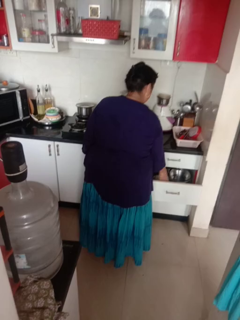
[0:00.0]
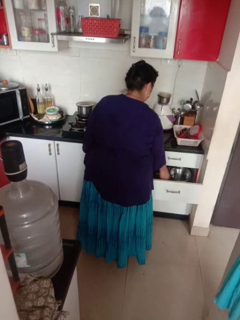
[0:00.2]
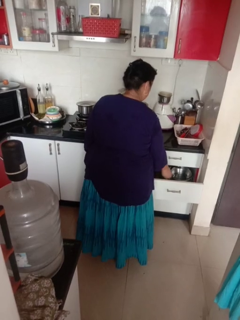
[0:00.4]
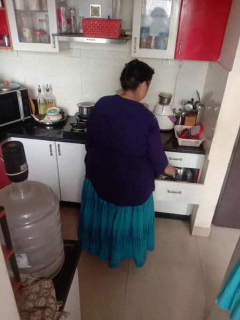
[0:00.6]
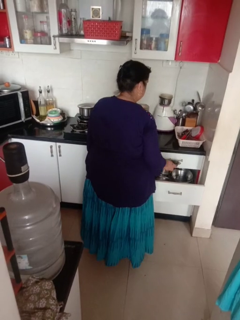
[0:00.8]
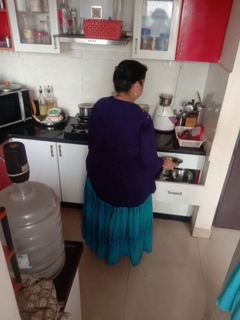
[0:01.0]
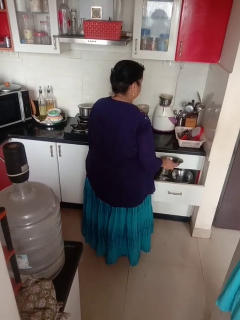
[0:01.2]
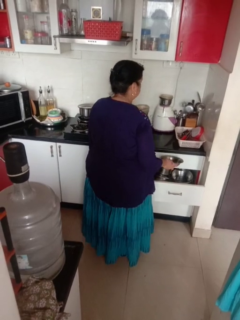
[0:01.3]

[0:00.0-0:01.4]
person takes object from kitchen drawer

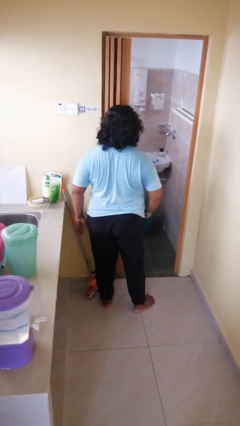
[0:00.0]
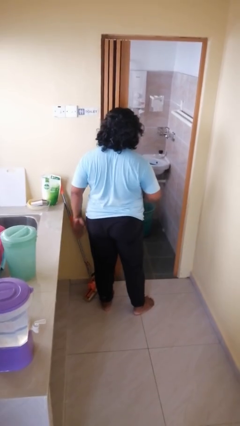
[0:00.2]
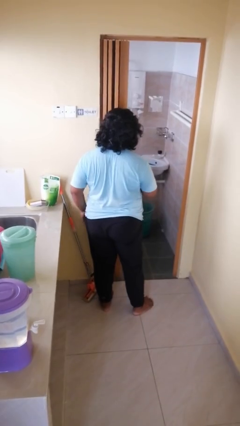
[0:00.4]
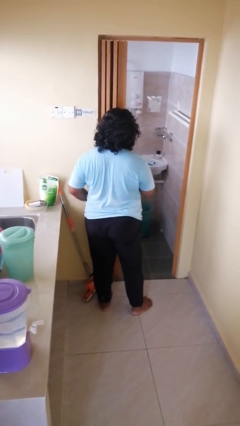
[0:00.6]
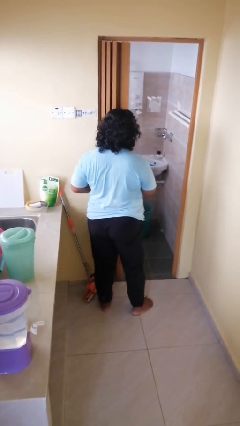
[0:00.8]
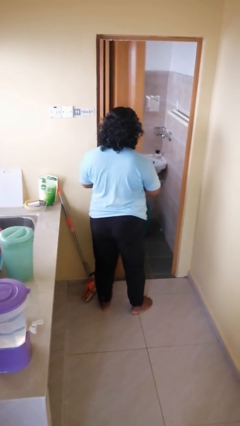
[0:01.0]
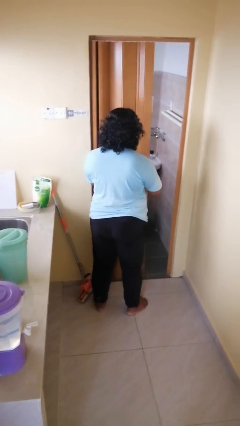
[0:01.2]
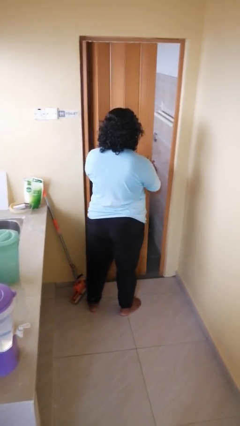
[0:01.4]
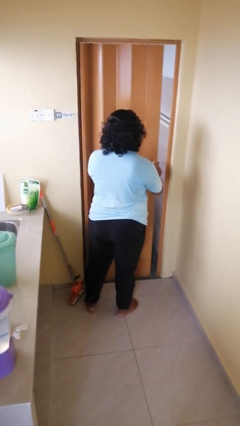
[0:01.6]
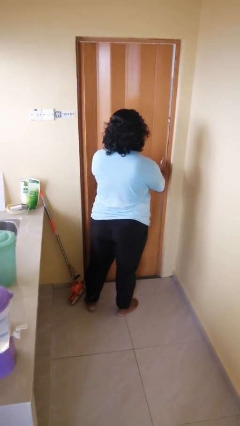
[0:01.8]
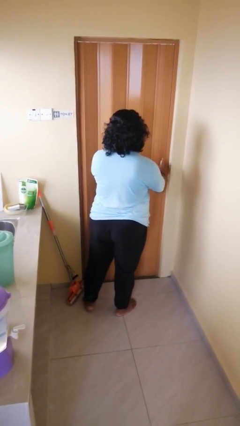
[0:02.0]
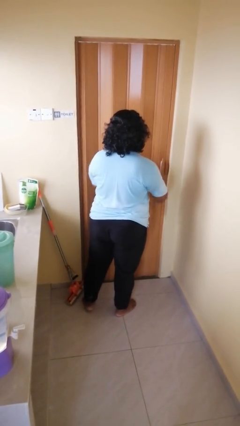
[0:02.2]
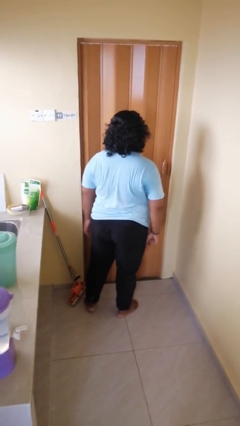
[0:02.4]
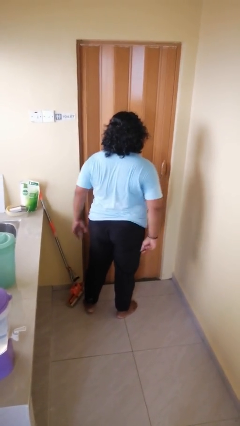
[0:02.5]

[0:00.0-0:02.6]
person closes sliding door

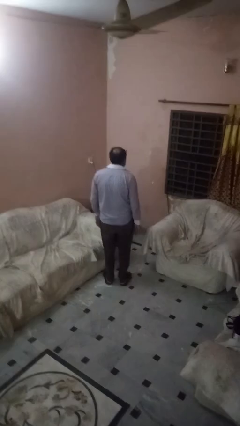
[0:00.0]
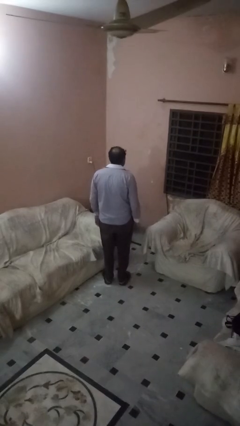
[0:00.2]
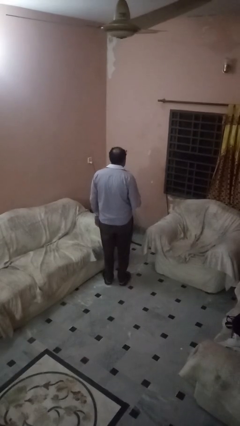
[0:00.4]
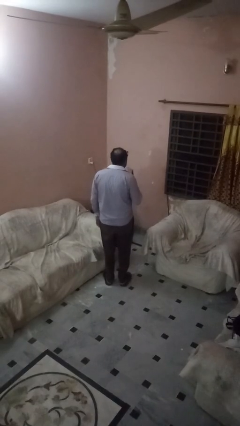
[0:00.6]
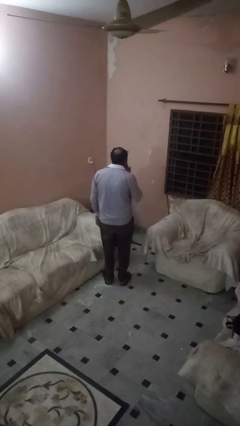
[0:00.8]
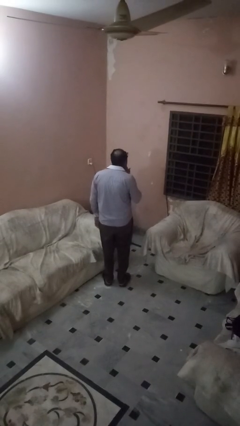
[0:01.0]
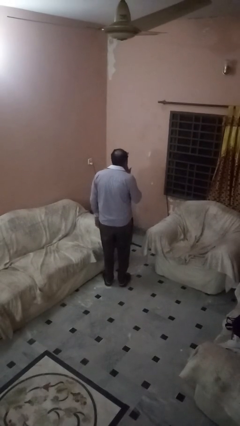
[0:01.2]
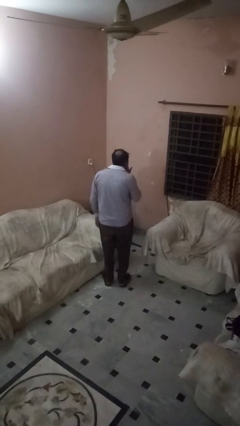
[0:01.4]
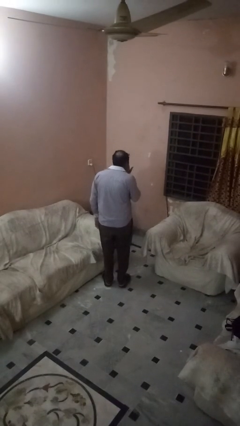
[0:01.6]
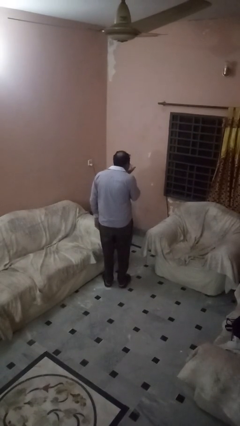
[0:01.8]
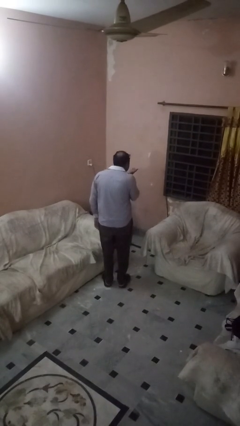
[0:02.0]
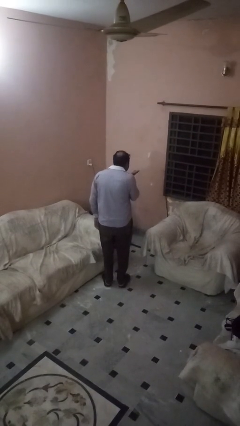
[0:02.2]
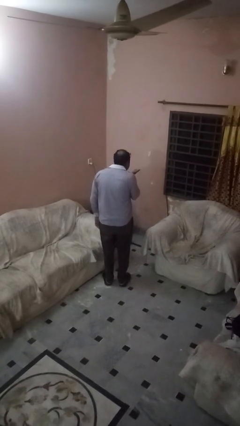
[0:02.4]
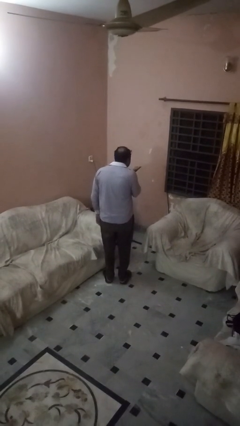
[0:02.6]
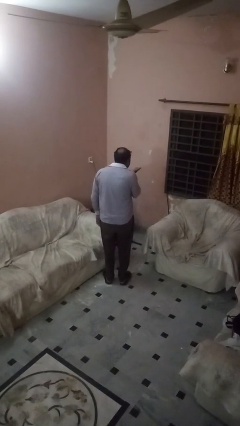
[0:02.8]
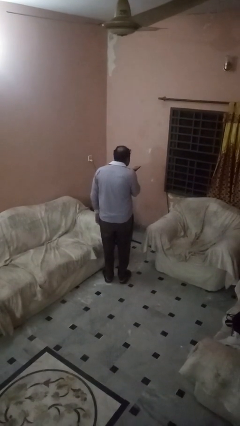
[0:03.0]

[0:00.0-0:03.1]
person gestures blow kiss

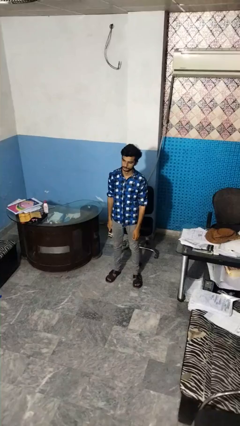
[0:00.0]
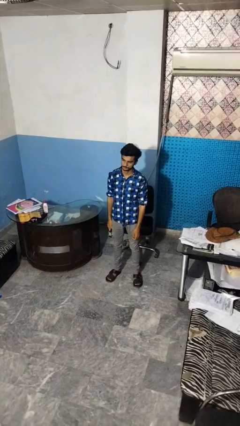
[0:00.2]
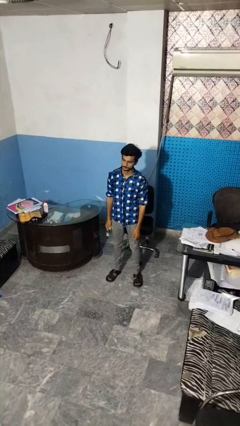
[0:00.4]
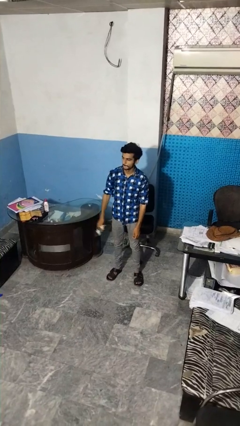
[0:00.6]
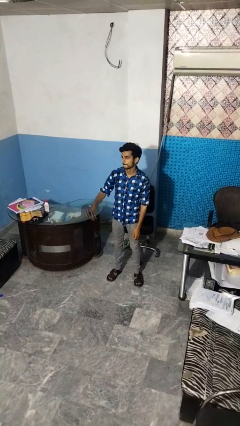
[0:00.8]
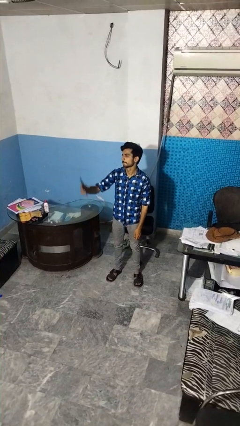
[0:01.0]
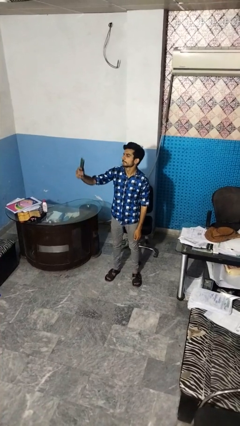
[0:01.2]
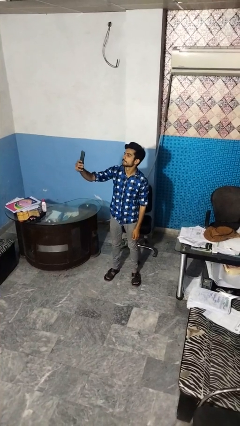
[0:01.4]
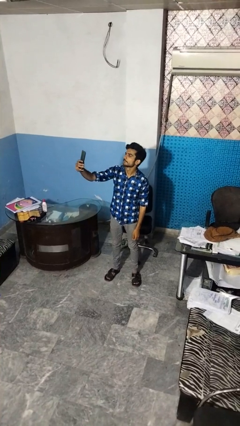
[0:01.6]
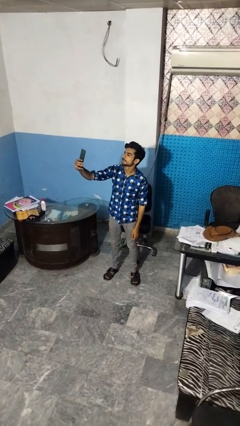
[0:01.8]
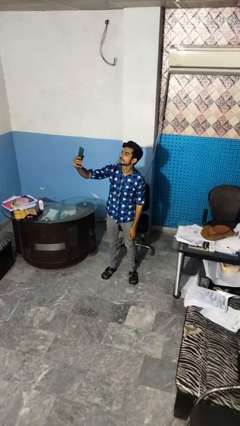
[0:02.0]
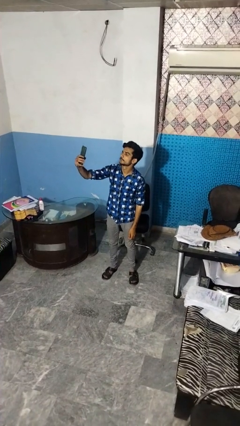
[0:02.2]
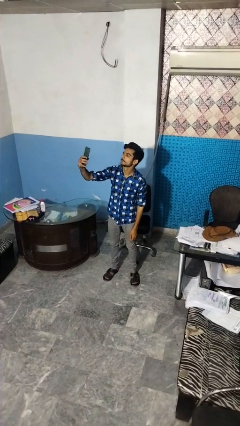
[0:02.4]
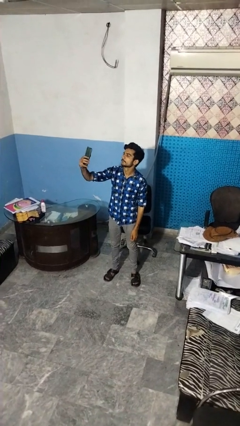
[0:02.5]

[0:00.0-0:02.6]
person takes selfie

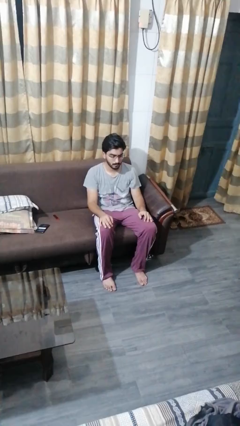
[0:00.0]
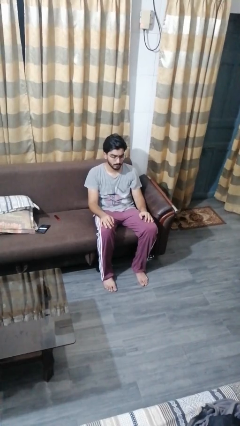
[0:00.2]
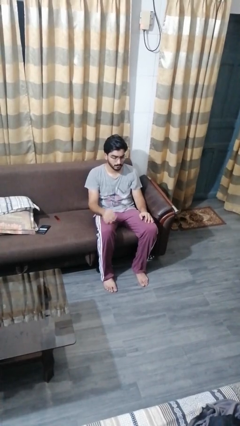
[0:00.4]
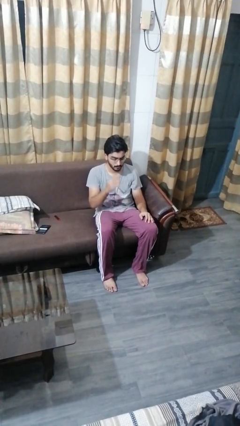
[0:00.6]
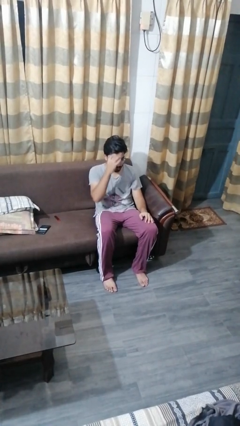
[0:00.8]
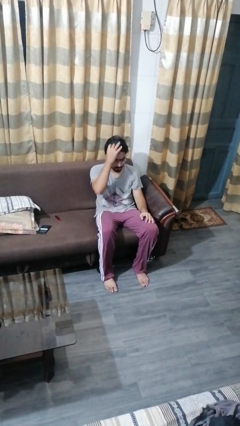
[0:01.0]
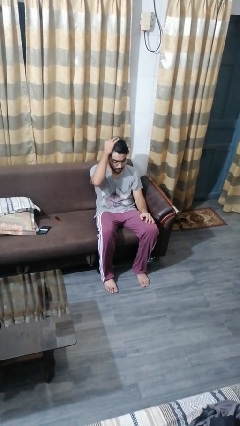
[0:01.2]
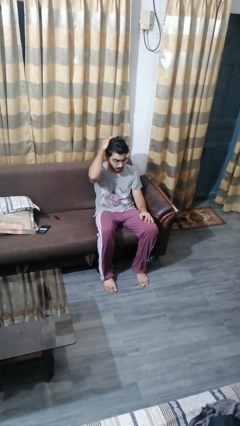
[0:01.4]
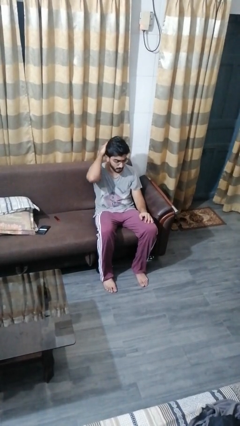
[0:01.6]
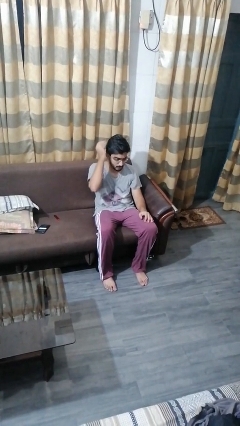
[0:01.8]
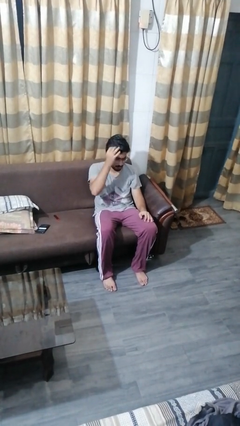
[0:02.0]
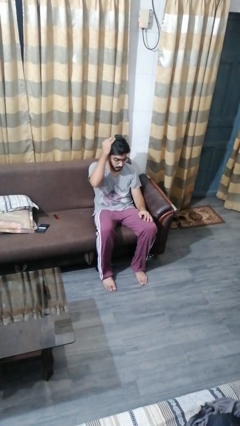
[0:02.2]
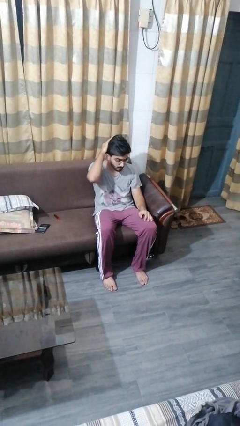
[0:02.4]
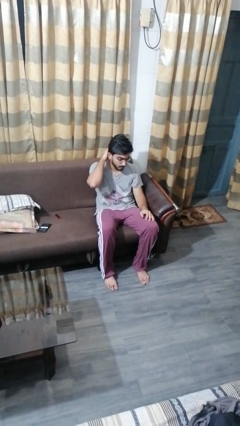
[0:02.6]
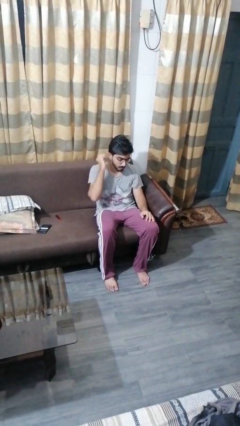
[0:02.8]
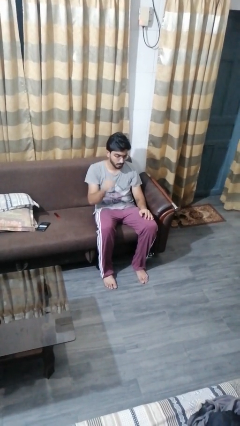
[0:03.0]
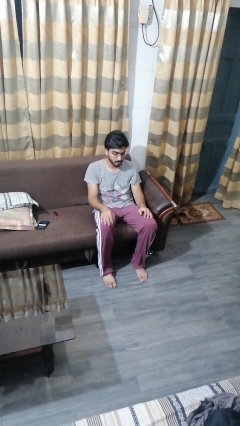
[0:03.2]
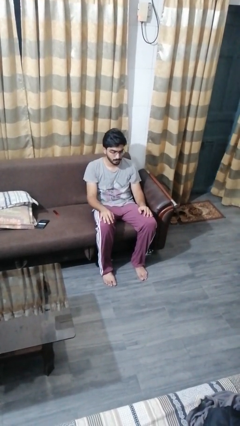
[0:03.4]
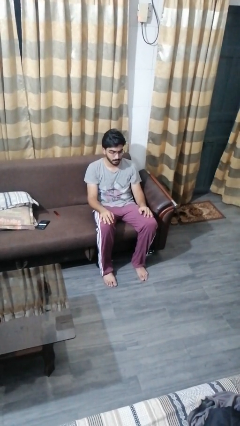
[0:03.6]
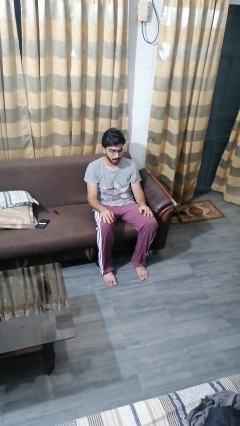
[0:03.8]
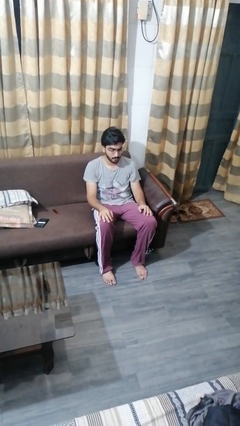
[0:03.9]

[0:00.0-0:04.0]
person strokes hair

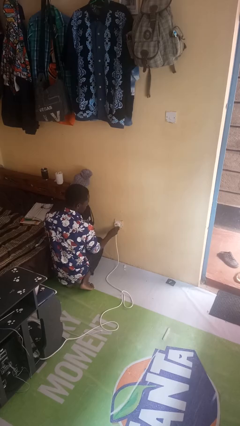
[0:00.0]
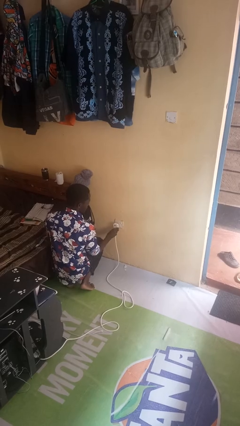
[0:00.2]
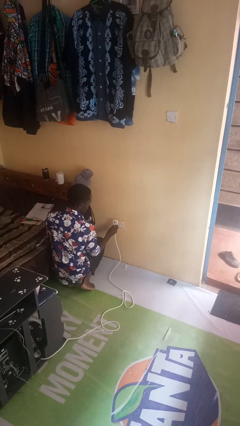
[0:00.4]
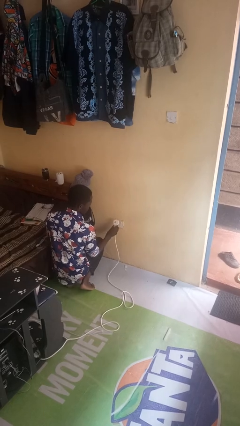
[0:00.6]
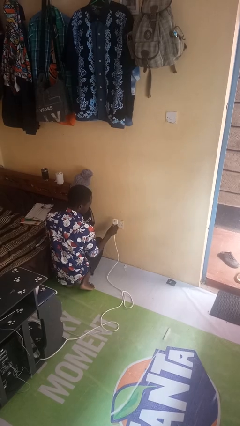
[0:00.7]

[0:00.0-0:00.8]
person unplugs from electrical socket

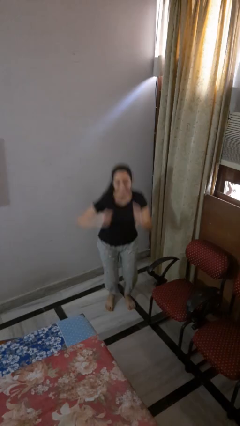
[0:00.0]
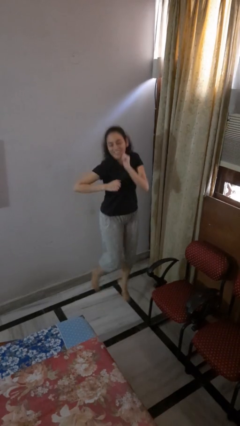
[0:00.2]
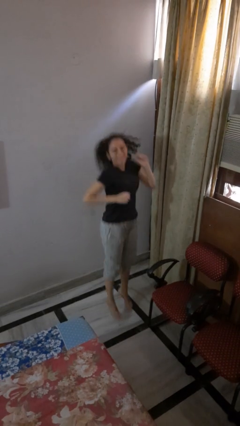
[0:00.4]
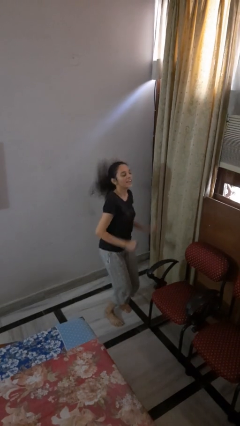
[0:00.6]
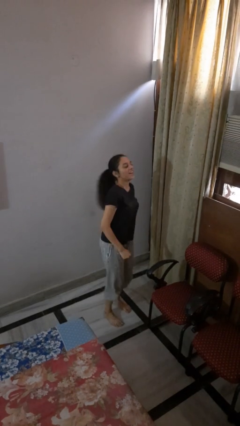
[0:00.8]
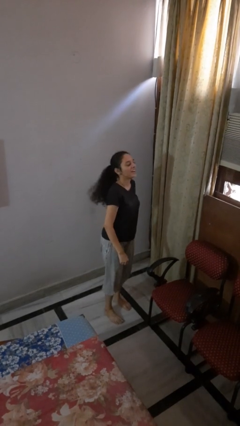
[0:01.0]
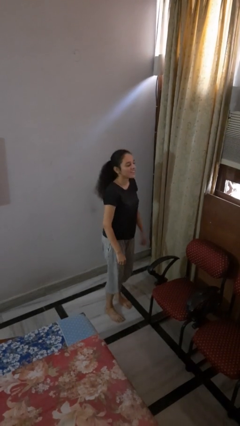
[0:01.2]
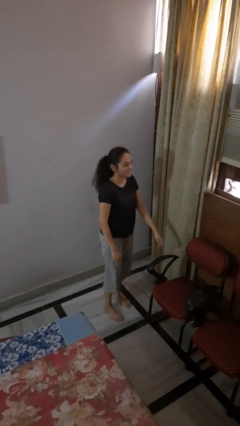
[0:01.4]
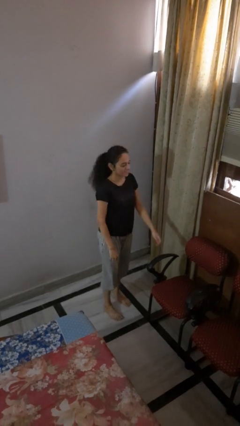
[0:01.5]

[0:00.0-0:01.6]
person jumps

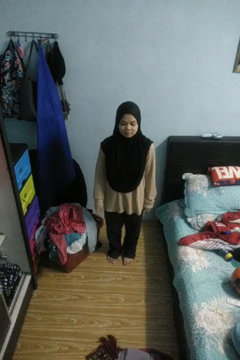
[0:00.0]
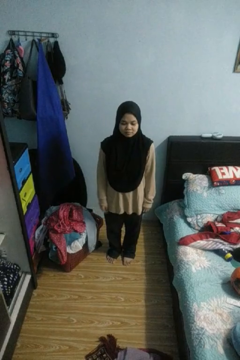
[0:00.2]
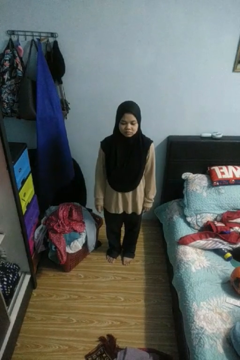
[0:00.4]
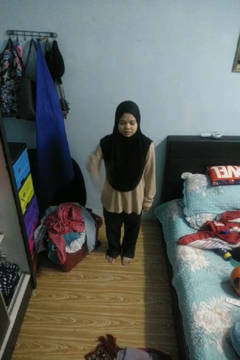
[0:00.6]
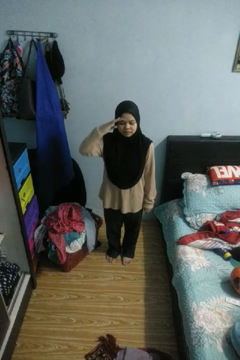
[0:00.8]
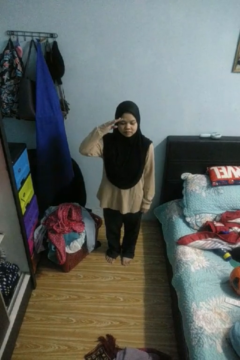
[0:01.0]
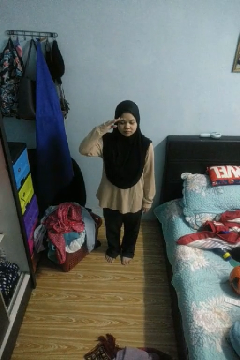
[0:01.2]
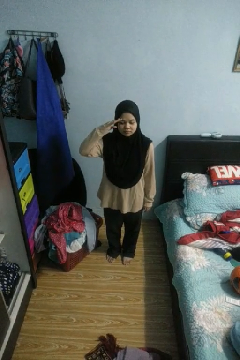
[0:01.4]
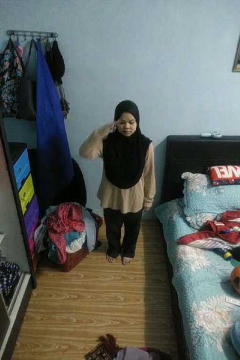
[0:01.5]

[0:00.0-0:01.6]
person salutes
